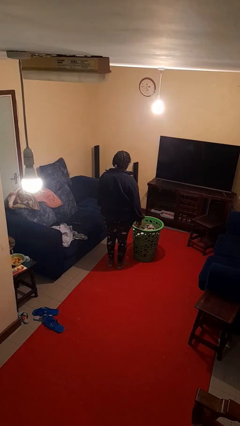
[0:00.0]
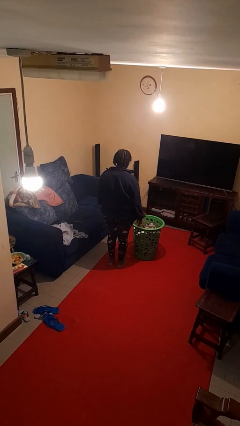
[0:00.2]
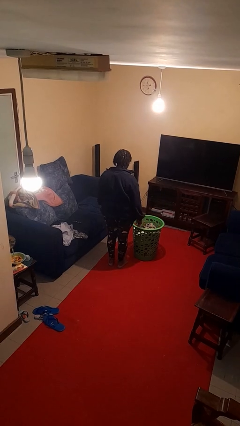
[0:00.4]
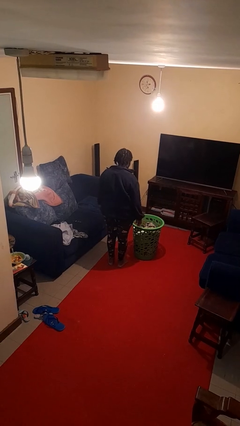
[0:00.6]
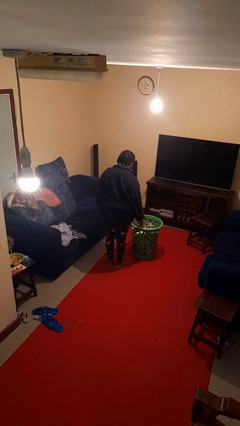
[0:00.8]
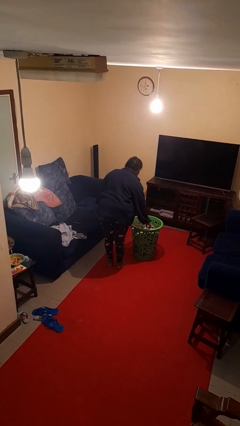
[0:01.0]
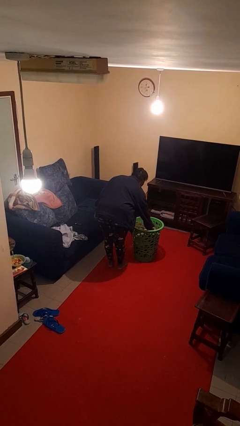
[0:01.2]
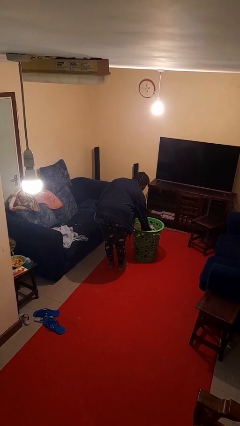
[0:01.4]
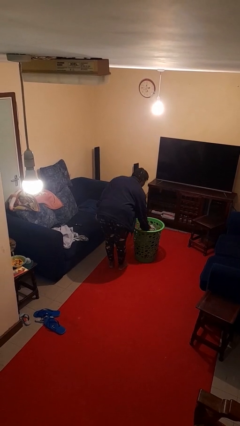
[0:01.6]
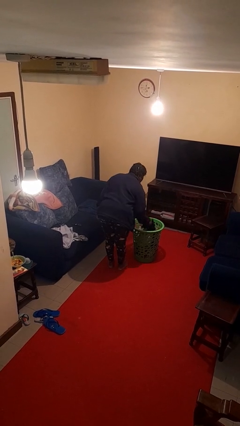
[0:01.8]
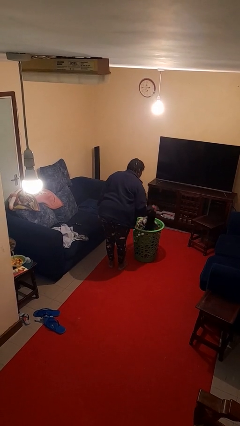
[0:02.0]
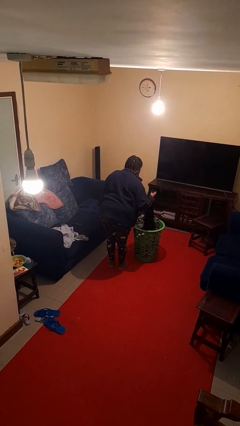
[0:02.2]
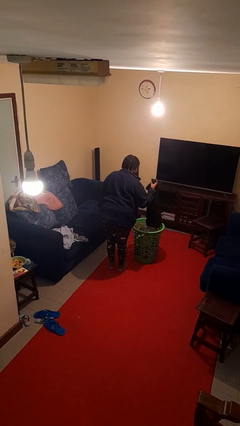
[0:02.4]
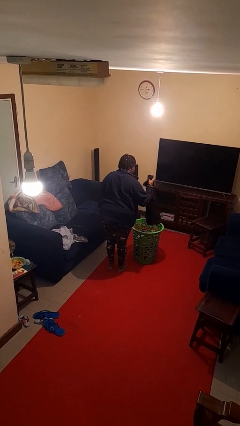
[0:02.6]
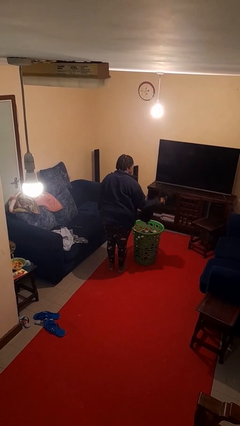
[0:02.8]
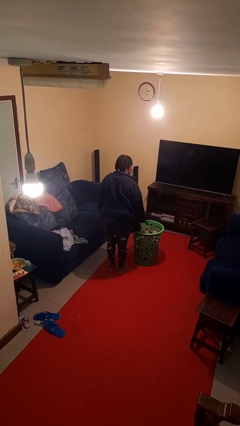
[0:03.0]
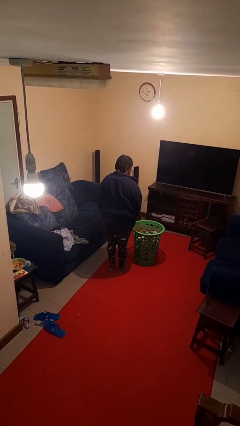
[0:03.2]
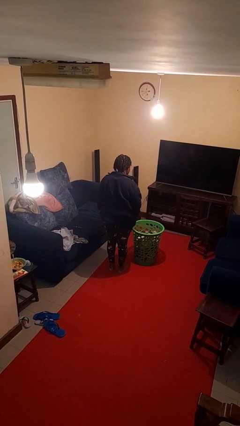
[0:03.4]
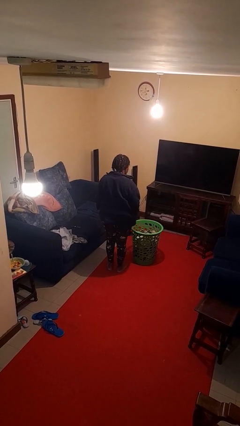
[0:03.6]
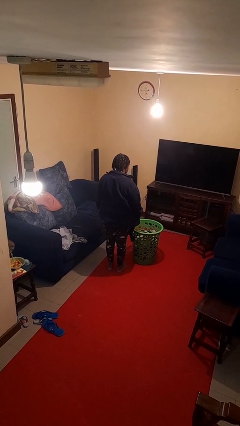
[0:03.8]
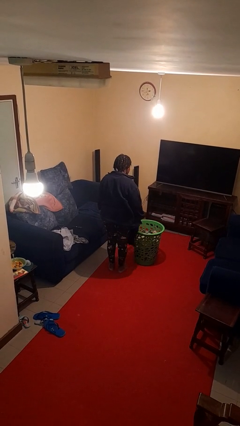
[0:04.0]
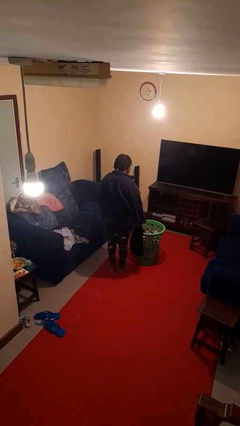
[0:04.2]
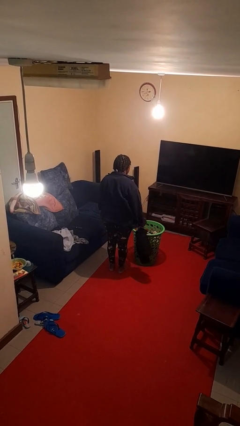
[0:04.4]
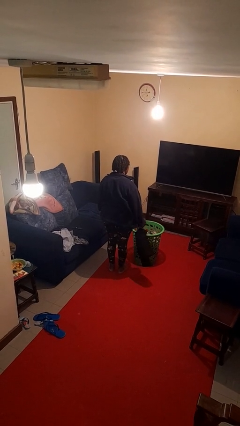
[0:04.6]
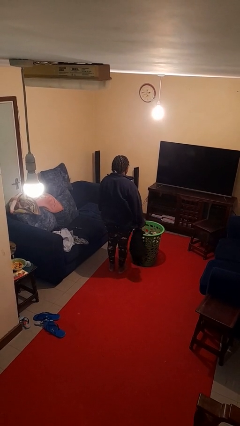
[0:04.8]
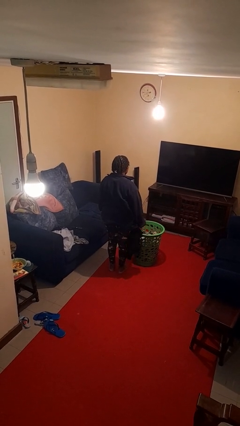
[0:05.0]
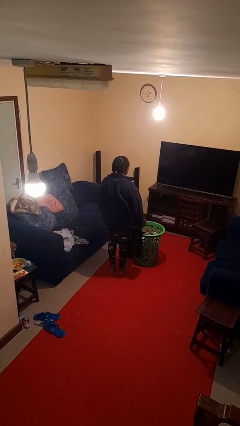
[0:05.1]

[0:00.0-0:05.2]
person takes object from basket

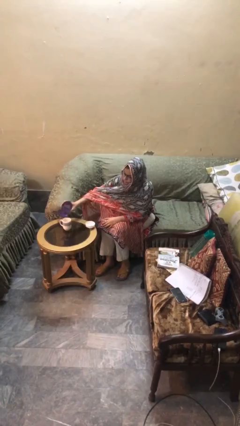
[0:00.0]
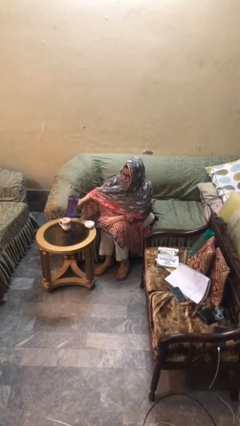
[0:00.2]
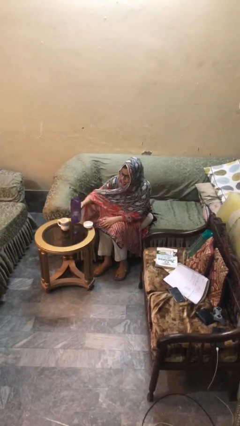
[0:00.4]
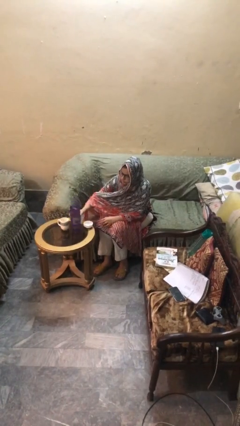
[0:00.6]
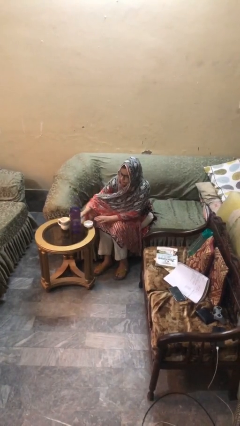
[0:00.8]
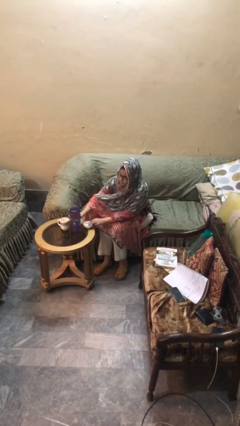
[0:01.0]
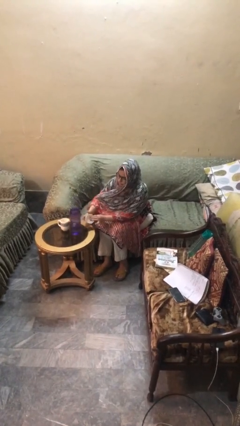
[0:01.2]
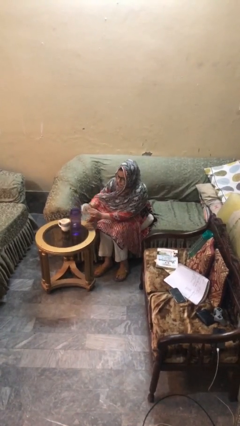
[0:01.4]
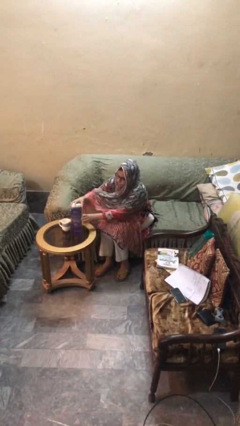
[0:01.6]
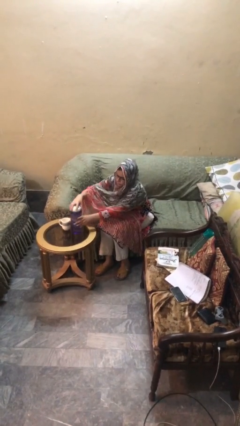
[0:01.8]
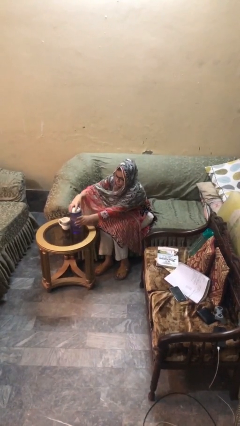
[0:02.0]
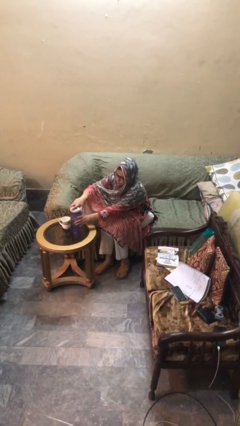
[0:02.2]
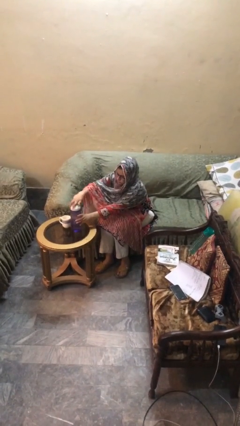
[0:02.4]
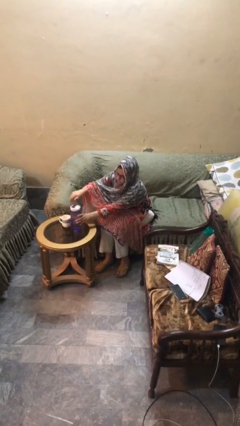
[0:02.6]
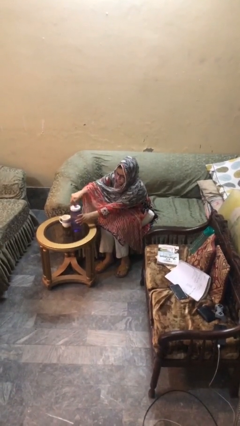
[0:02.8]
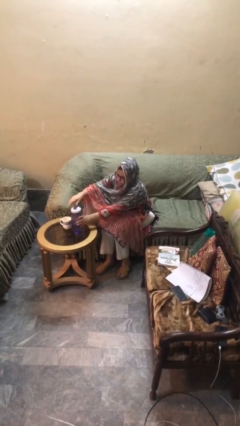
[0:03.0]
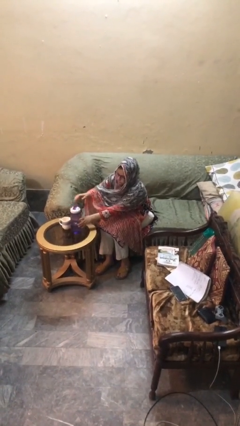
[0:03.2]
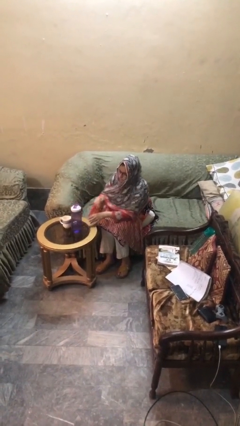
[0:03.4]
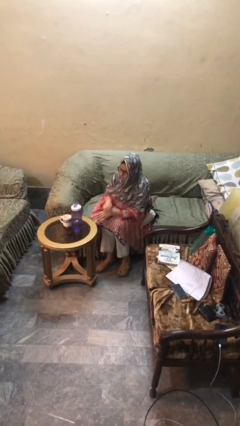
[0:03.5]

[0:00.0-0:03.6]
person screws lid to bottle

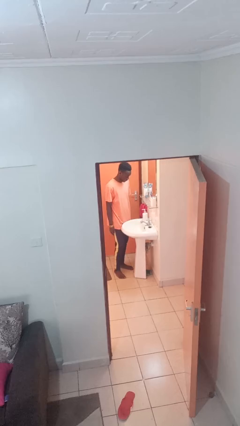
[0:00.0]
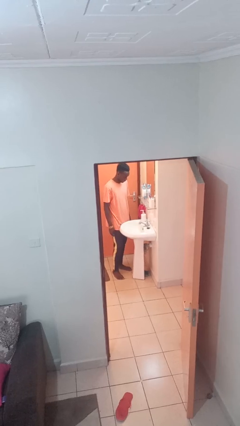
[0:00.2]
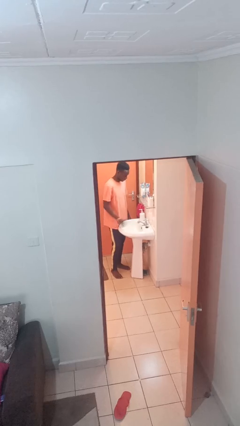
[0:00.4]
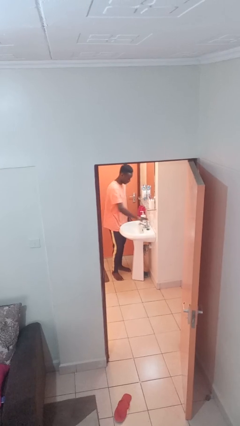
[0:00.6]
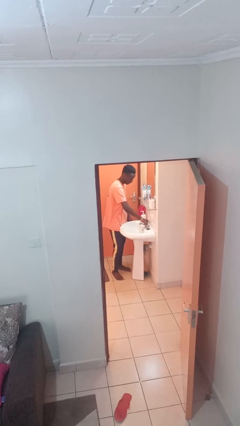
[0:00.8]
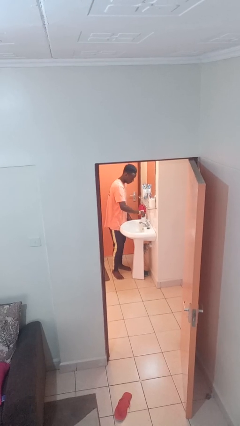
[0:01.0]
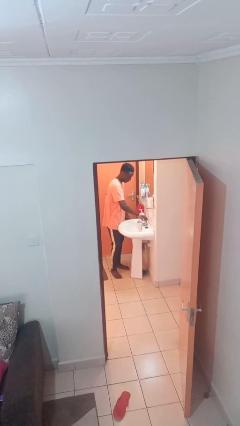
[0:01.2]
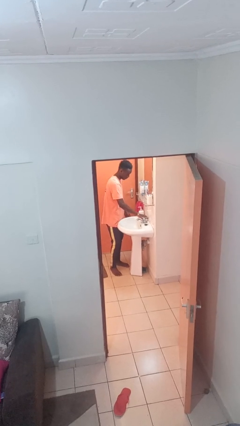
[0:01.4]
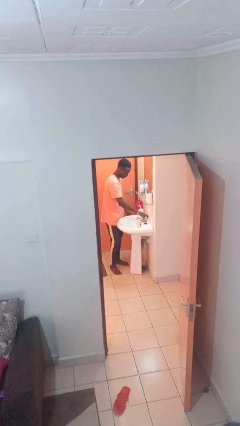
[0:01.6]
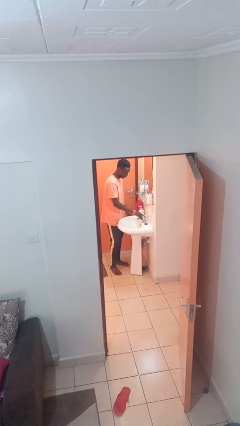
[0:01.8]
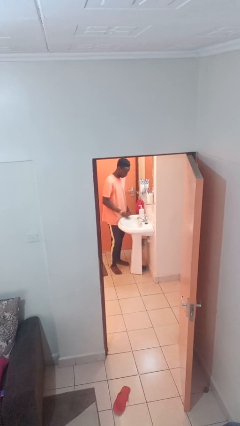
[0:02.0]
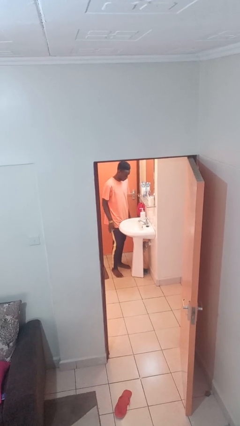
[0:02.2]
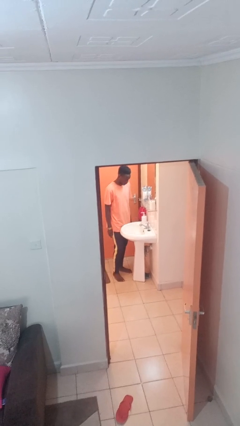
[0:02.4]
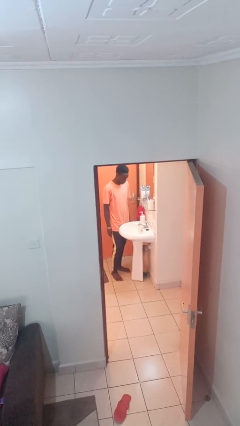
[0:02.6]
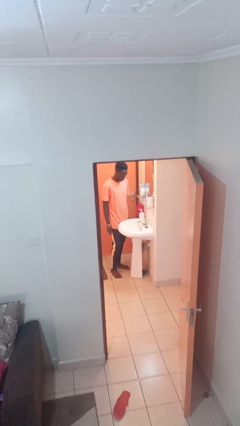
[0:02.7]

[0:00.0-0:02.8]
person turns off faucet

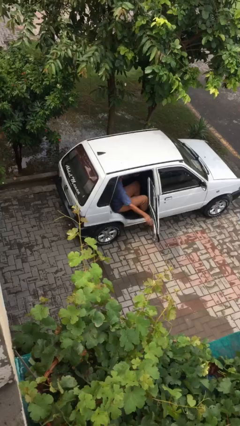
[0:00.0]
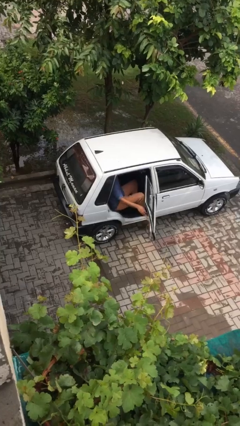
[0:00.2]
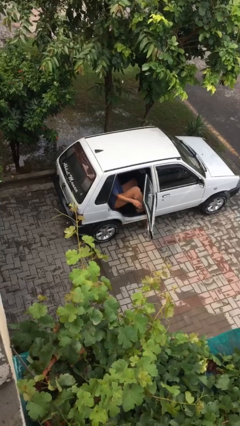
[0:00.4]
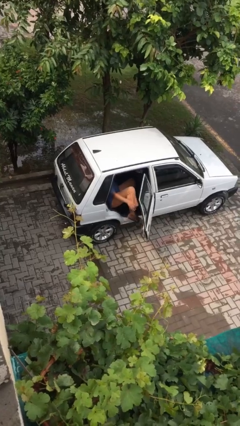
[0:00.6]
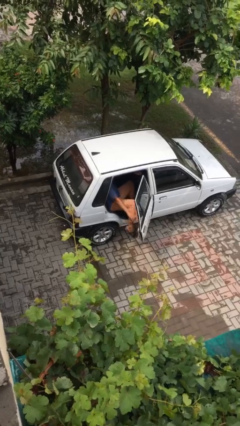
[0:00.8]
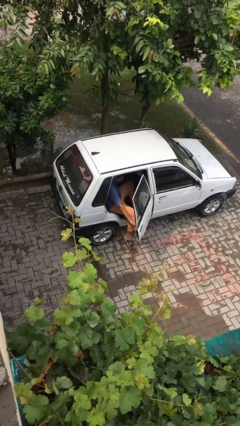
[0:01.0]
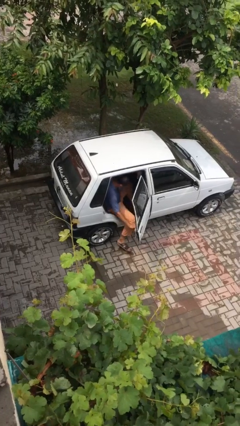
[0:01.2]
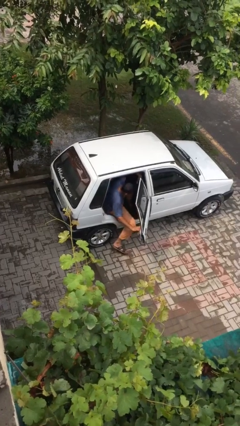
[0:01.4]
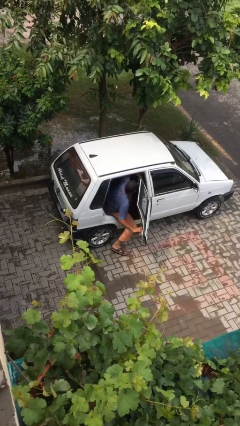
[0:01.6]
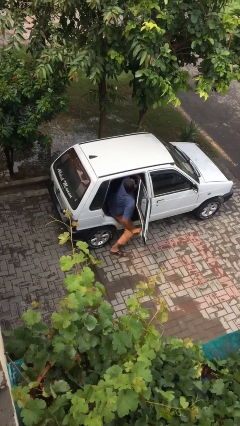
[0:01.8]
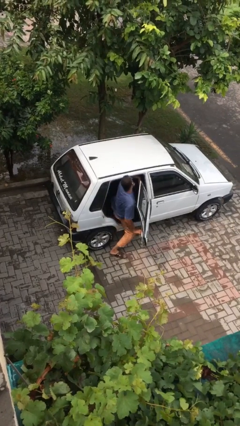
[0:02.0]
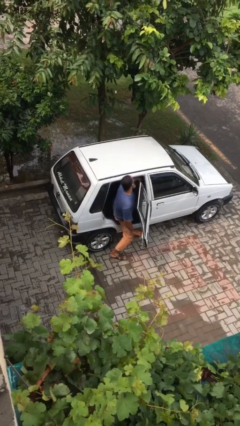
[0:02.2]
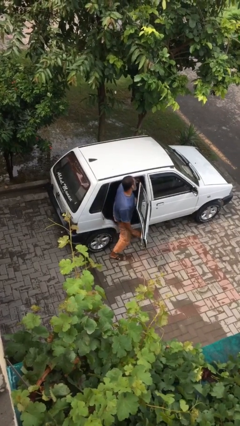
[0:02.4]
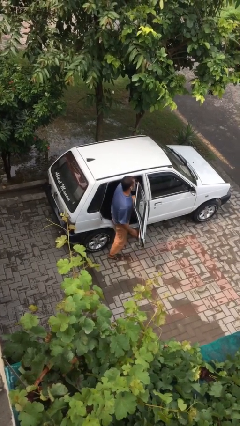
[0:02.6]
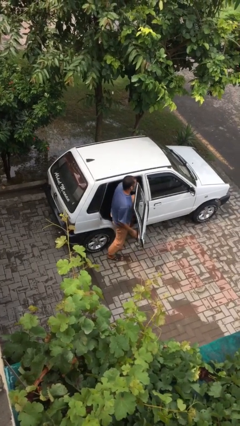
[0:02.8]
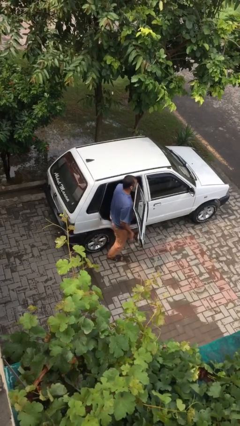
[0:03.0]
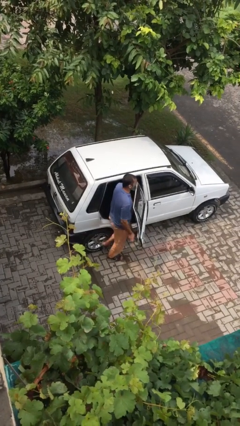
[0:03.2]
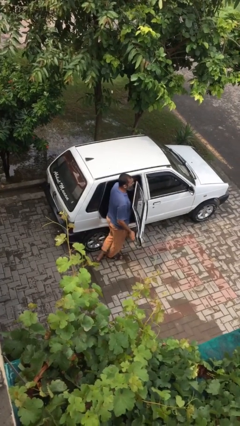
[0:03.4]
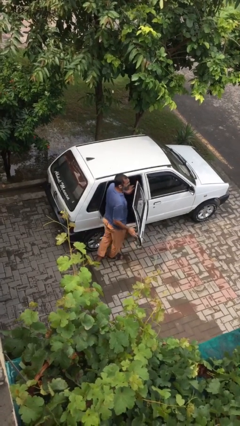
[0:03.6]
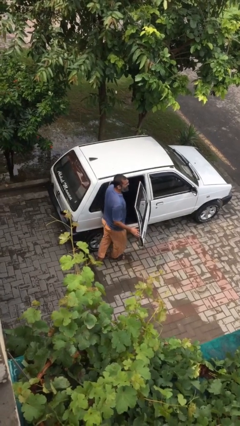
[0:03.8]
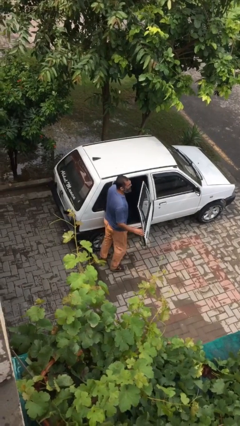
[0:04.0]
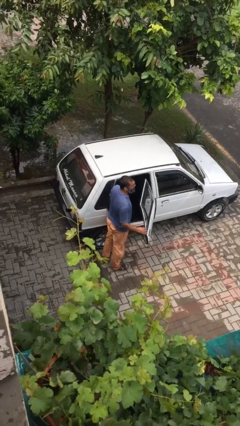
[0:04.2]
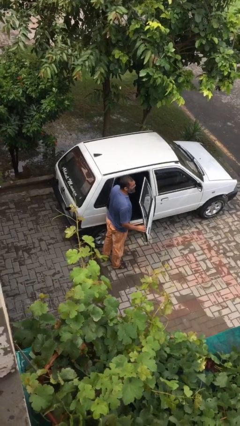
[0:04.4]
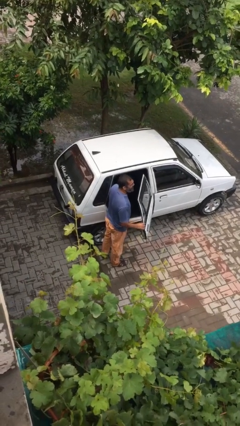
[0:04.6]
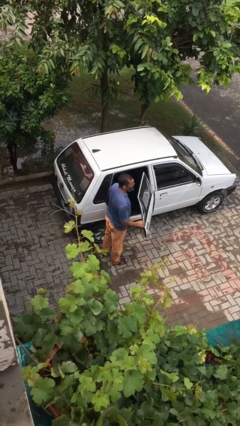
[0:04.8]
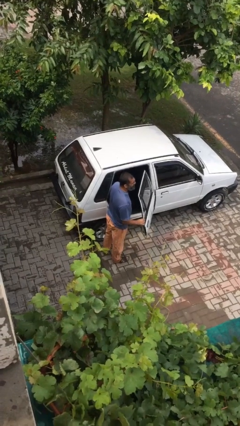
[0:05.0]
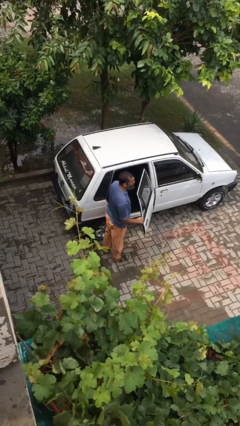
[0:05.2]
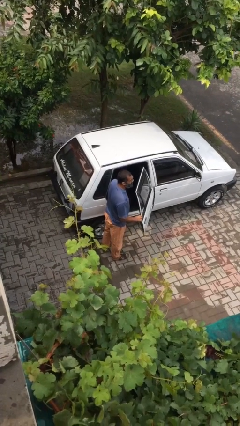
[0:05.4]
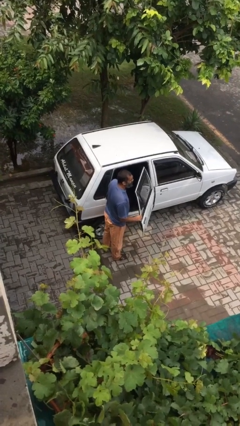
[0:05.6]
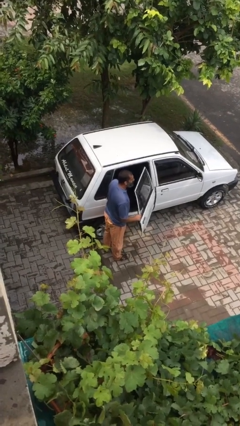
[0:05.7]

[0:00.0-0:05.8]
person exits car

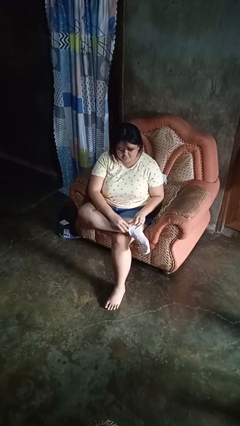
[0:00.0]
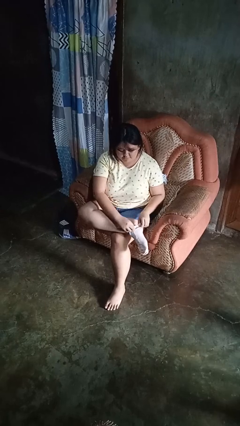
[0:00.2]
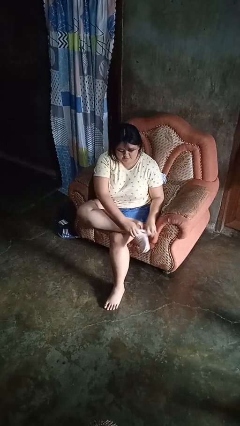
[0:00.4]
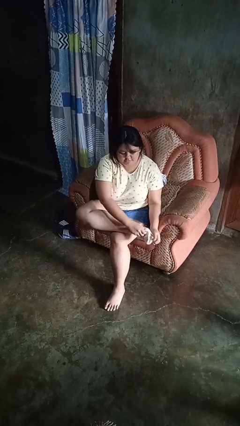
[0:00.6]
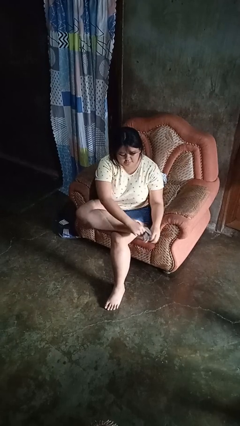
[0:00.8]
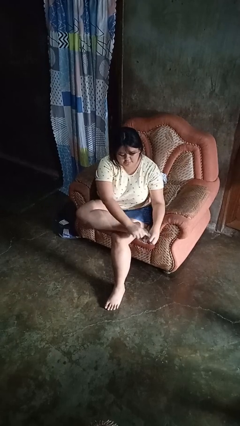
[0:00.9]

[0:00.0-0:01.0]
person takes off socks
